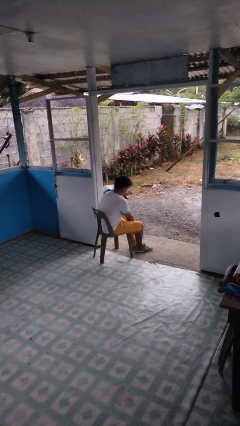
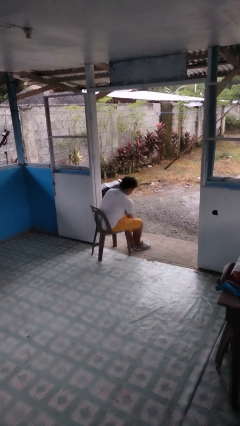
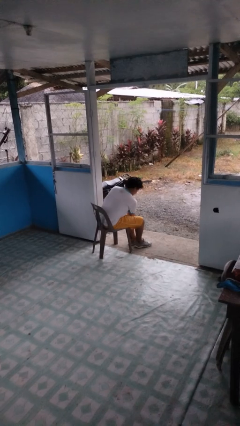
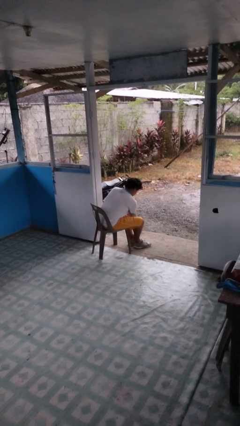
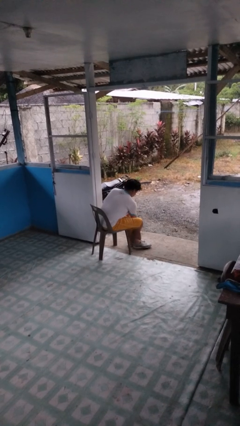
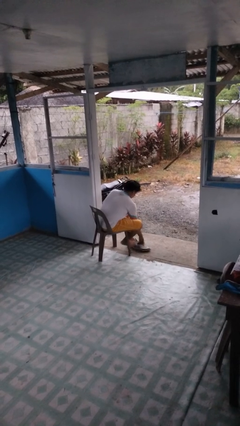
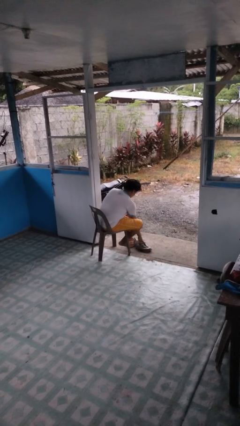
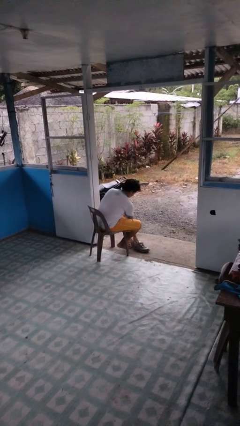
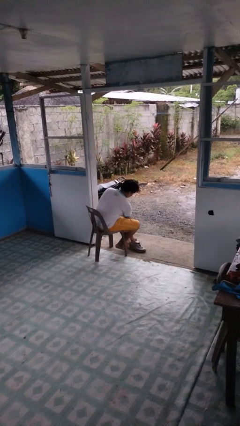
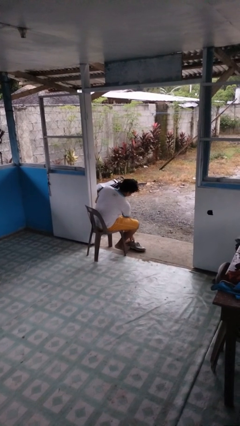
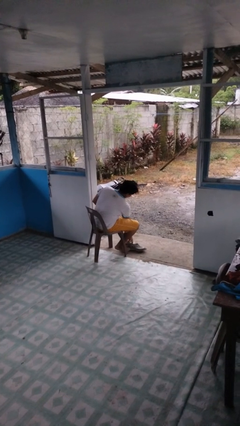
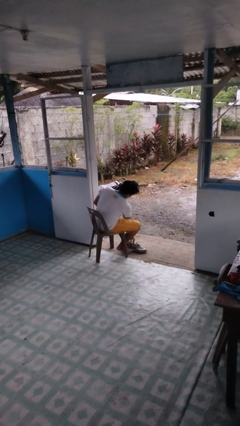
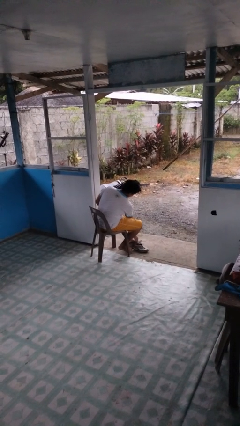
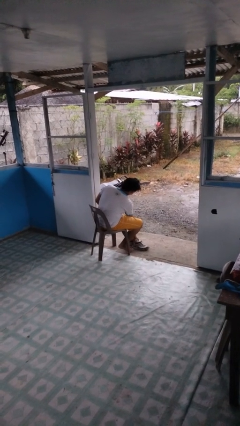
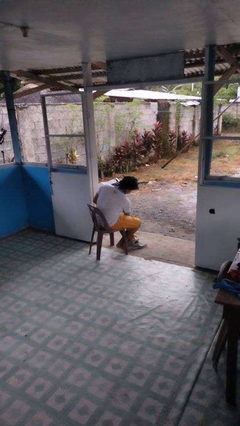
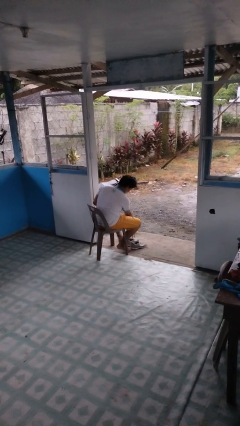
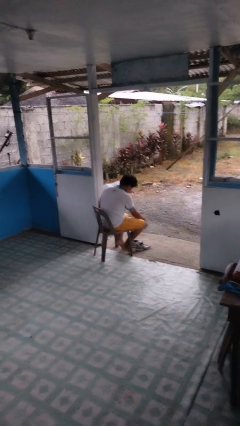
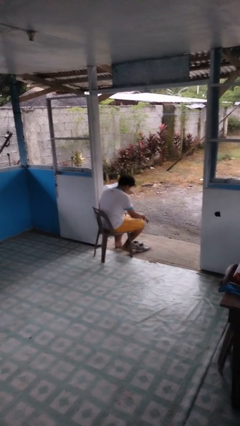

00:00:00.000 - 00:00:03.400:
person takes off shoes

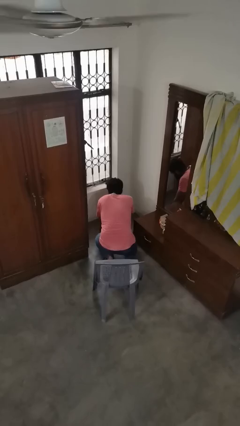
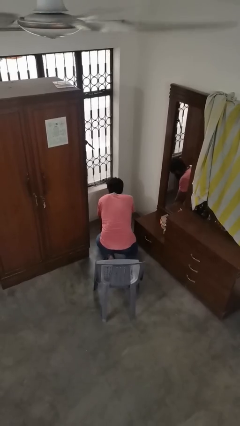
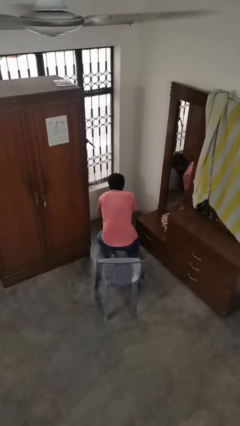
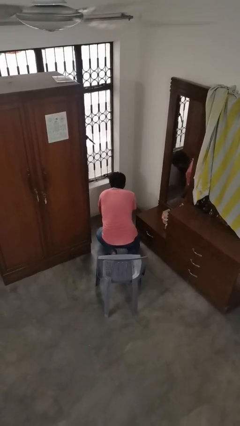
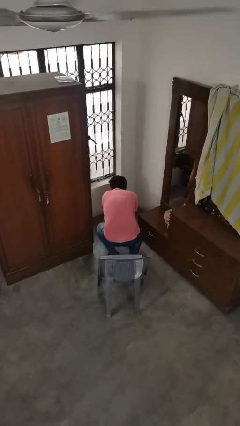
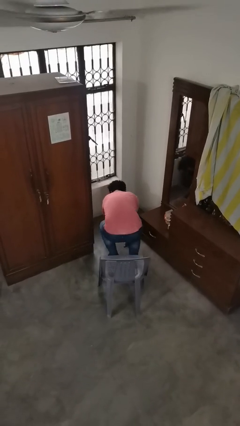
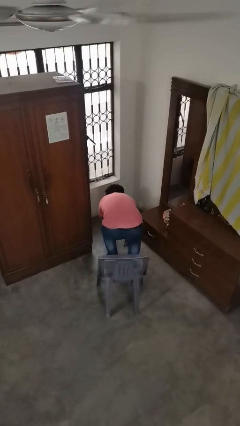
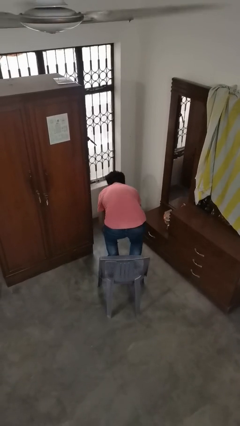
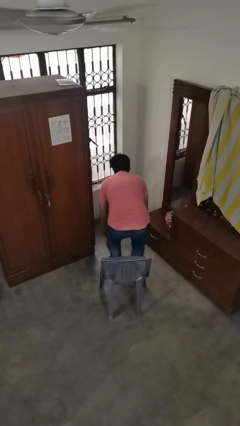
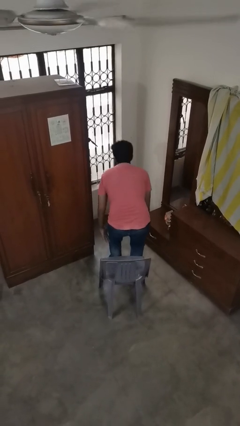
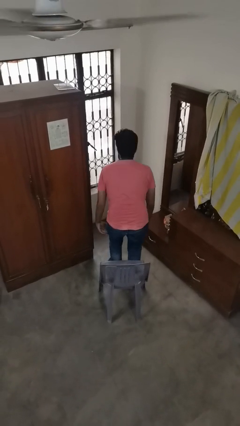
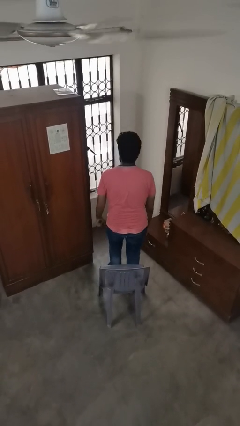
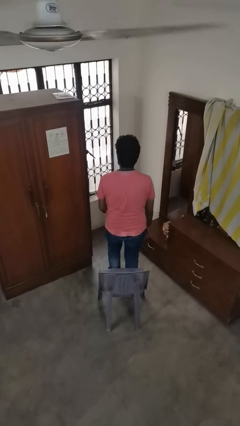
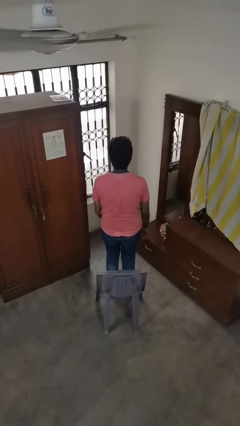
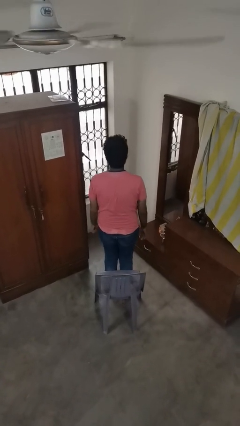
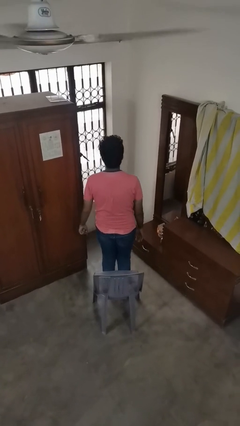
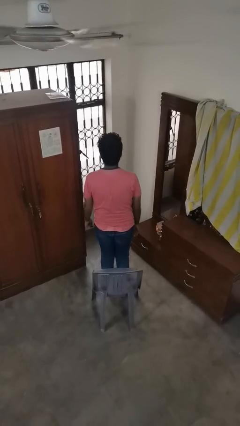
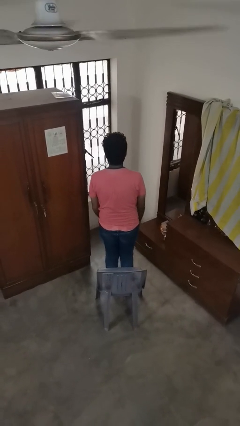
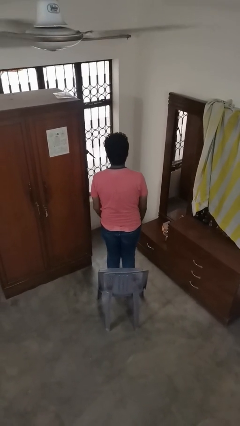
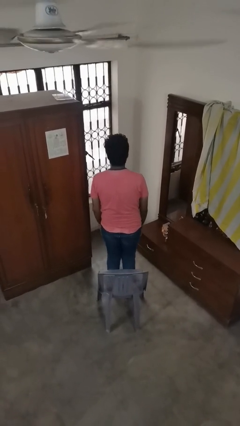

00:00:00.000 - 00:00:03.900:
person stands up from floor

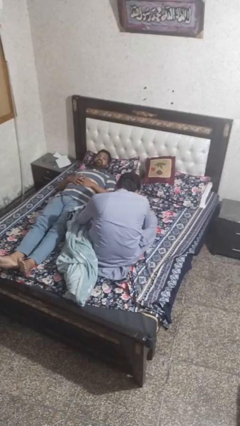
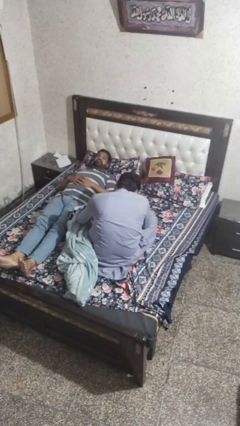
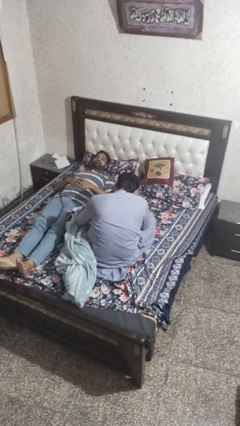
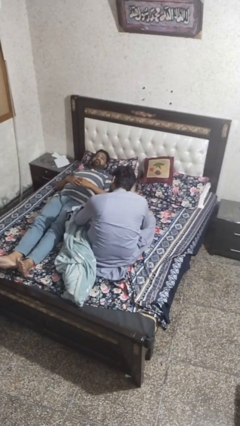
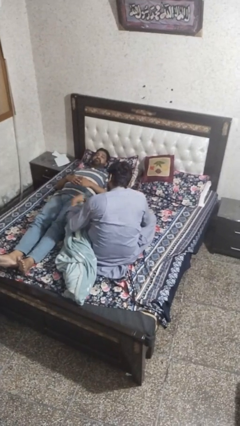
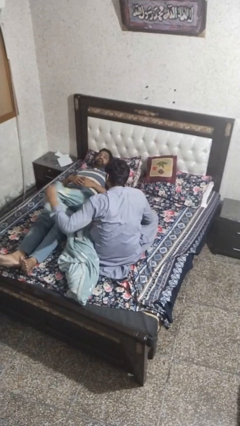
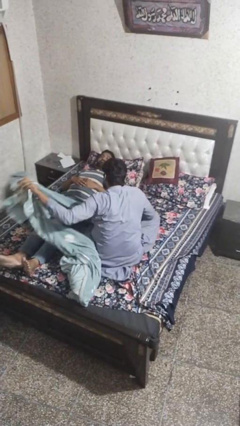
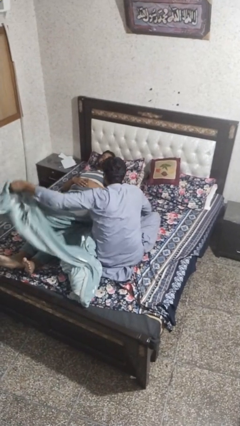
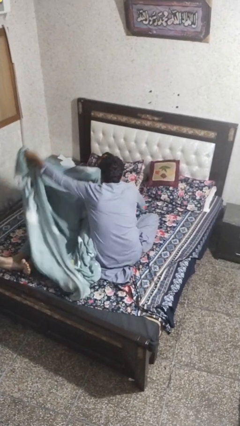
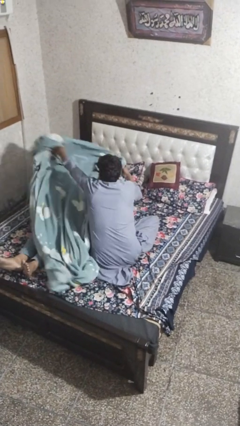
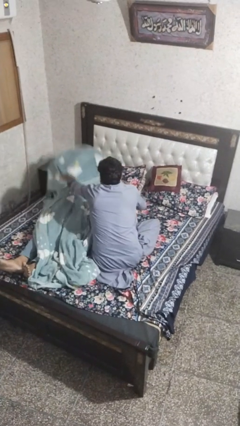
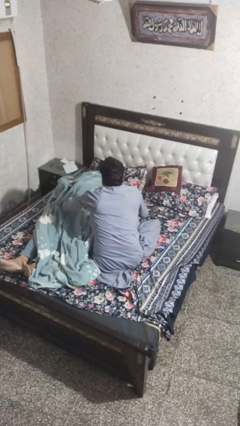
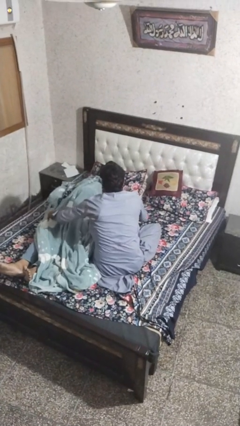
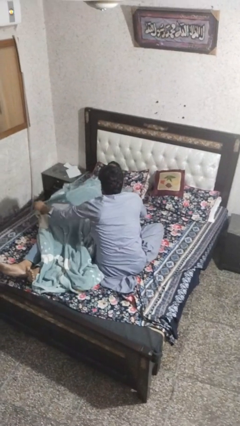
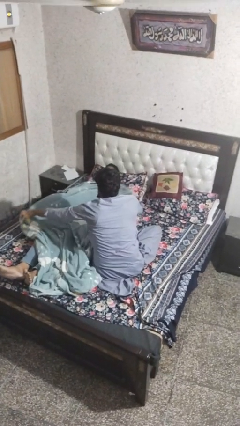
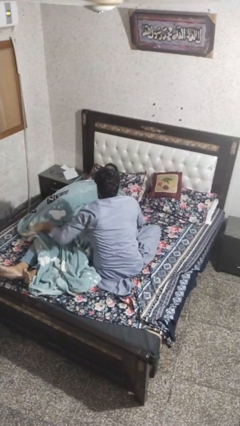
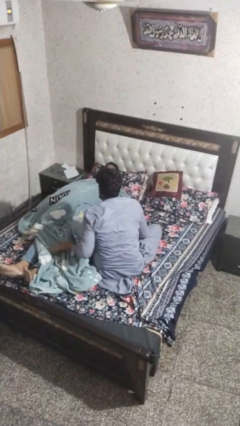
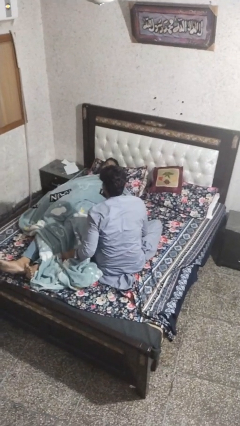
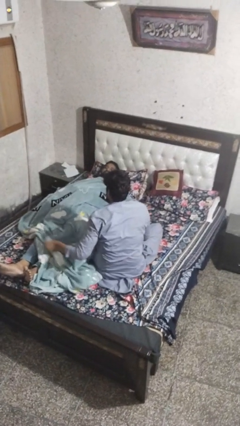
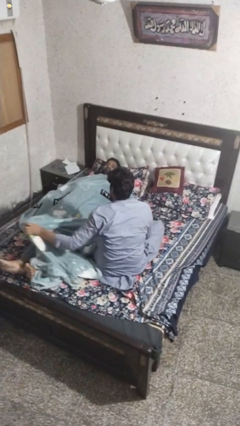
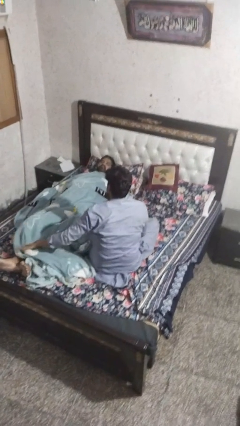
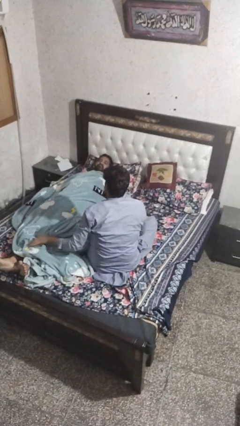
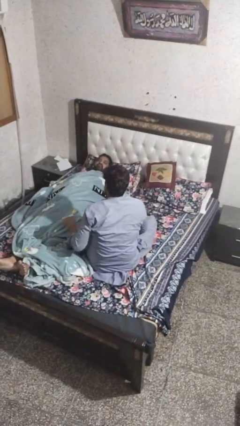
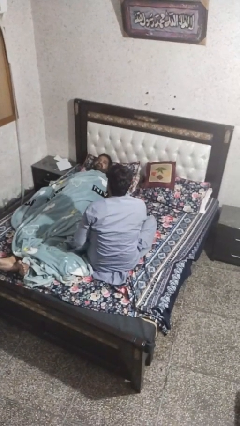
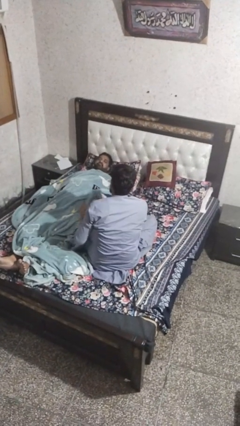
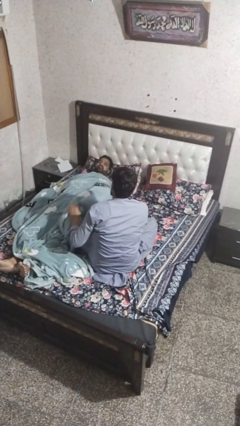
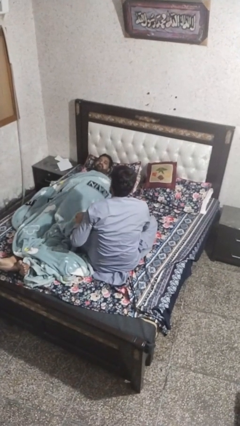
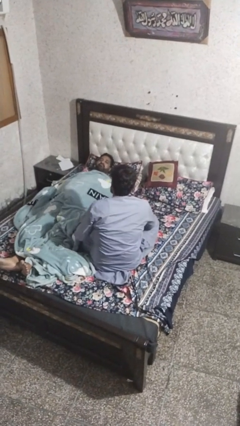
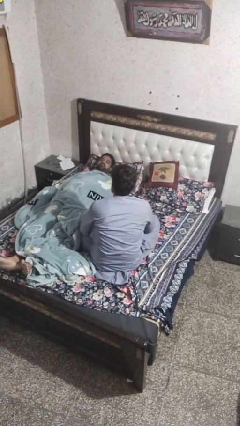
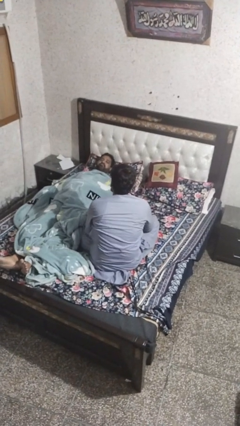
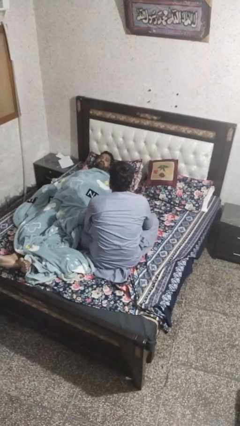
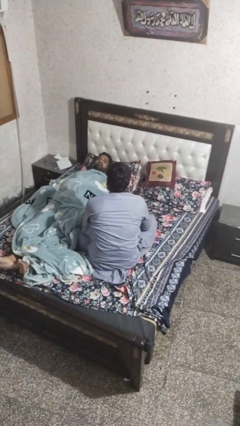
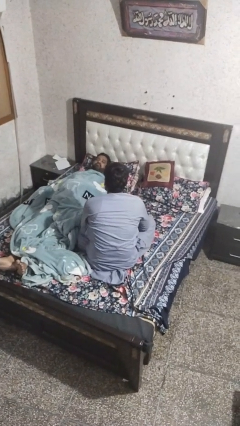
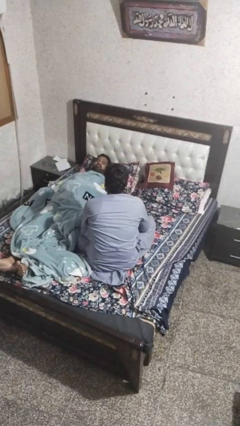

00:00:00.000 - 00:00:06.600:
person covers friend with blanket

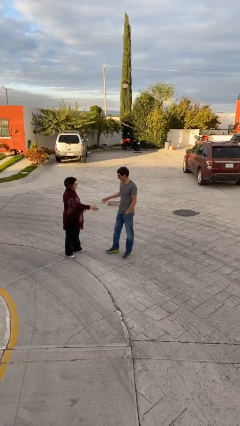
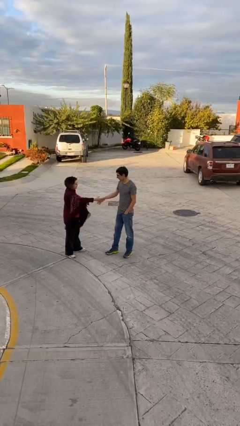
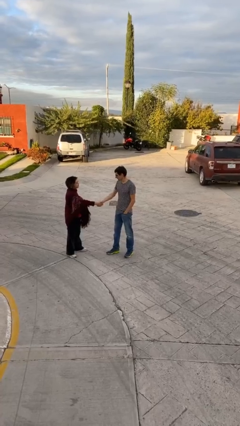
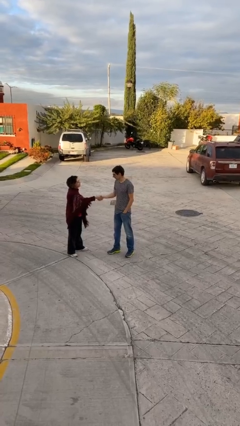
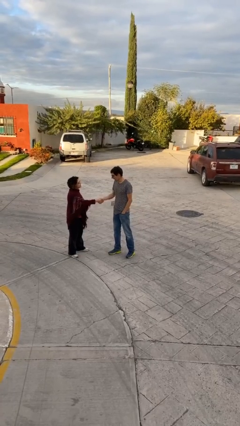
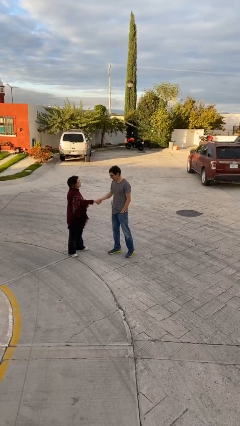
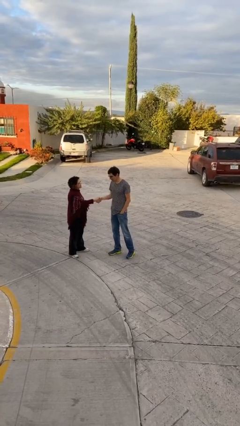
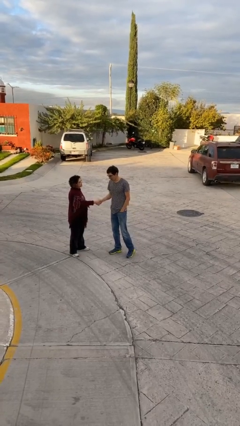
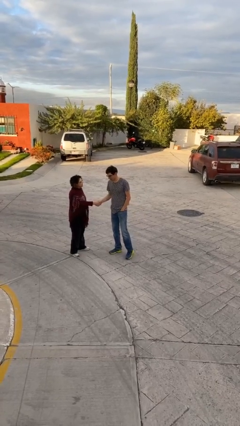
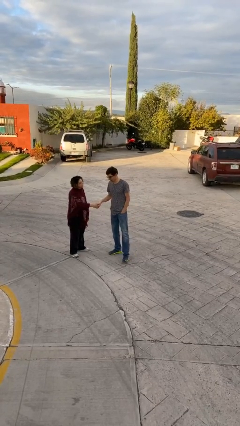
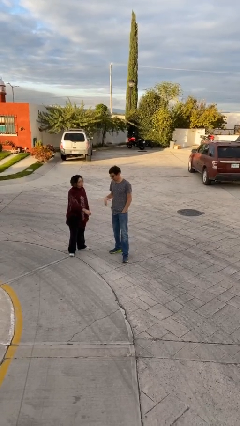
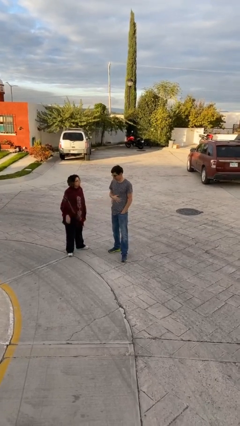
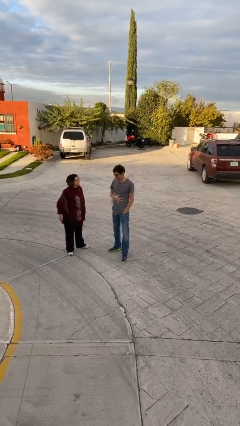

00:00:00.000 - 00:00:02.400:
person shakes hand

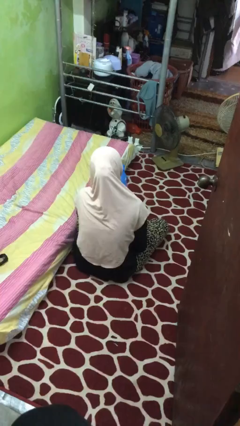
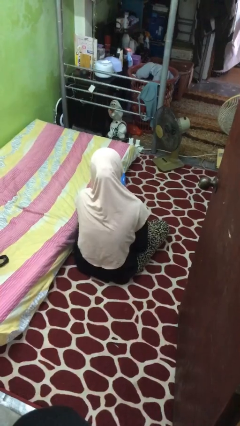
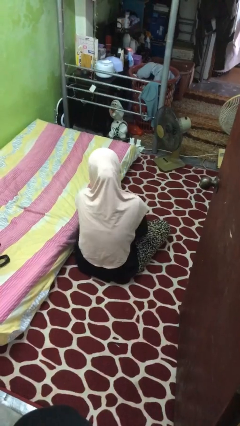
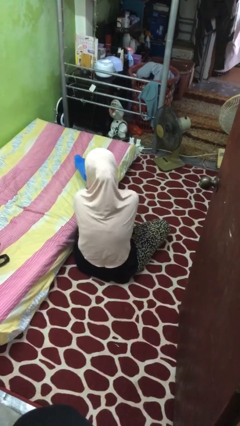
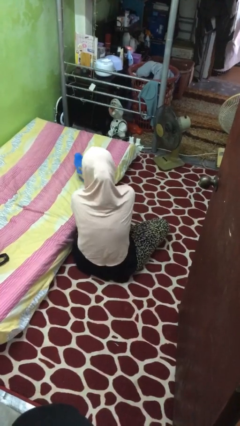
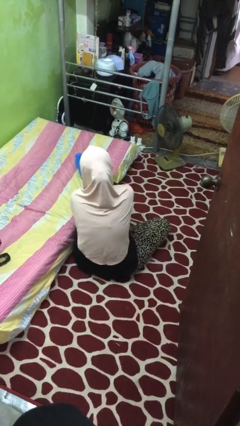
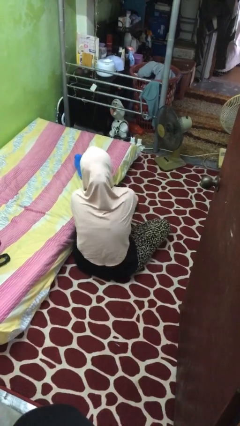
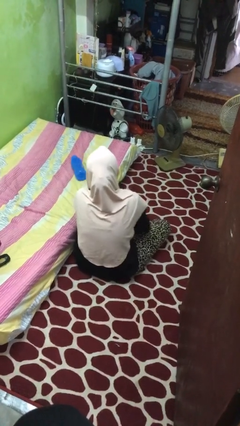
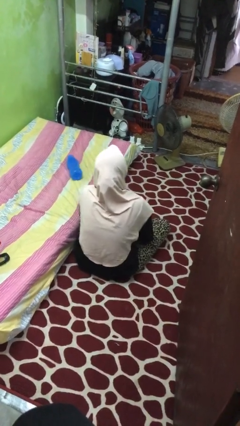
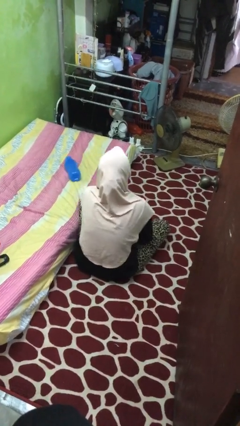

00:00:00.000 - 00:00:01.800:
person puts down object on bed
